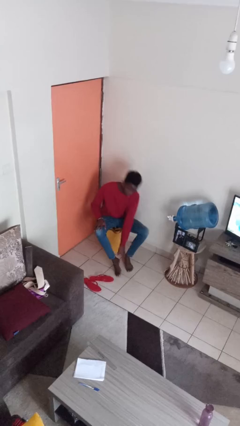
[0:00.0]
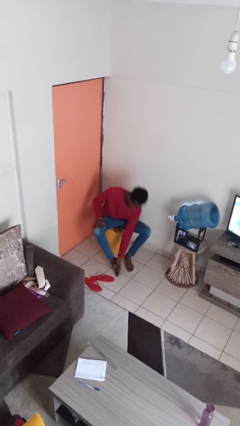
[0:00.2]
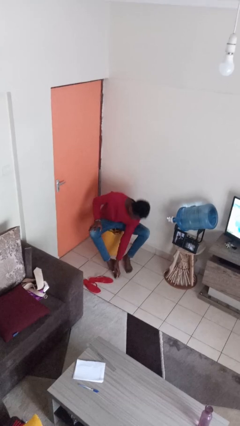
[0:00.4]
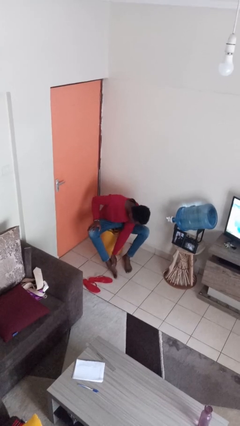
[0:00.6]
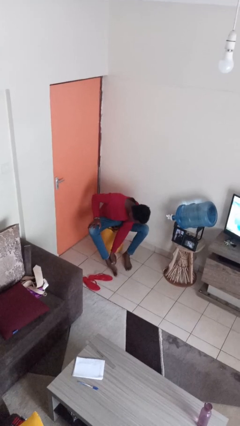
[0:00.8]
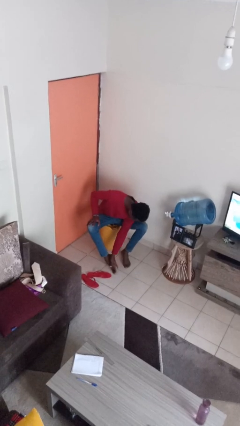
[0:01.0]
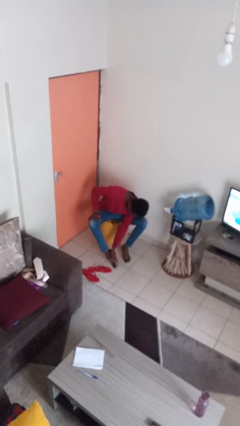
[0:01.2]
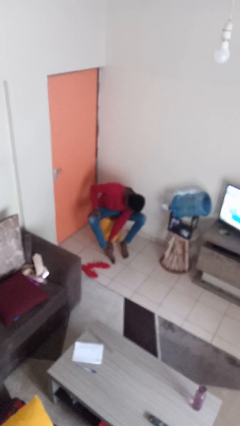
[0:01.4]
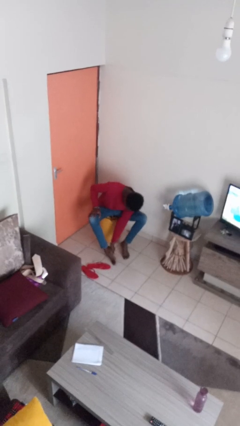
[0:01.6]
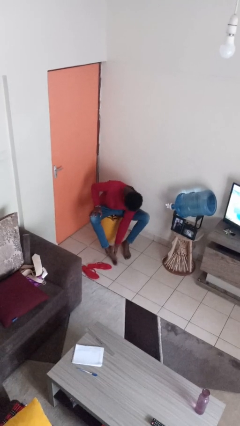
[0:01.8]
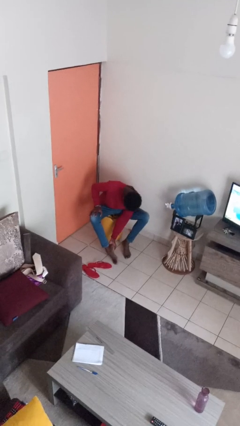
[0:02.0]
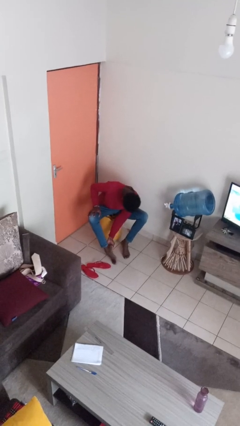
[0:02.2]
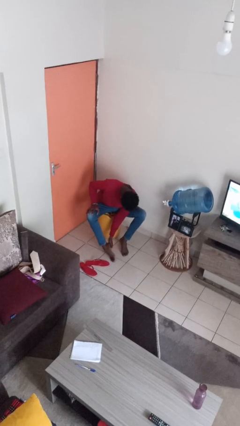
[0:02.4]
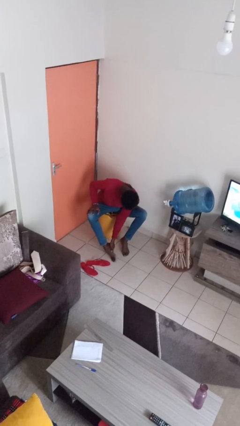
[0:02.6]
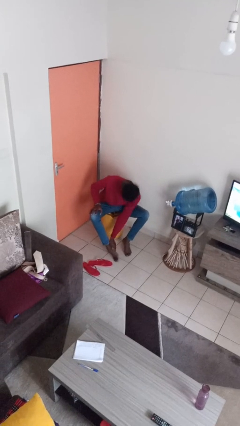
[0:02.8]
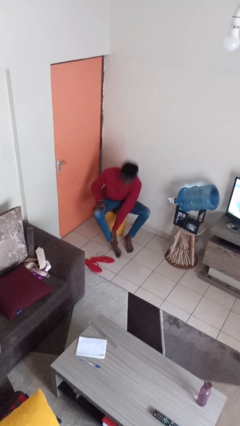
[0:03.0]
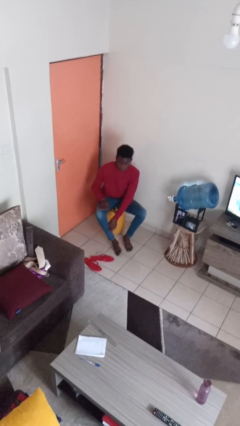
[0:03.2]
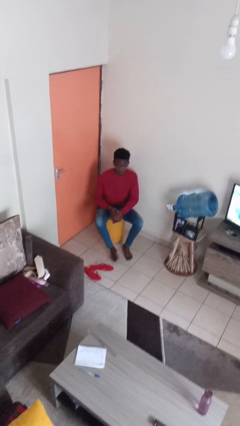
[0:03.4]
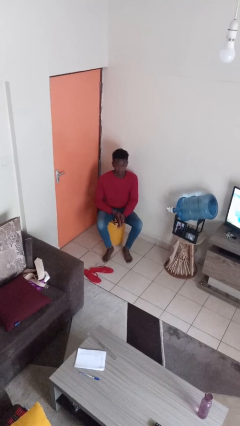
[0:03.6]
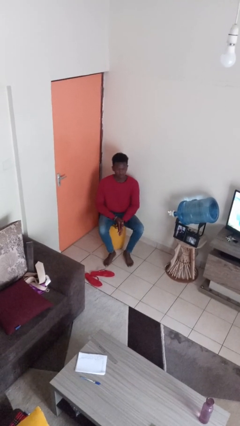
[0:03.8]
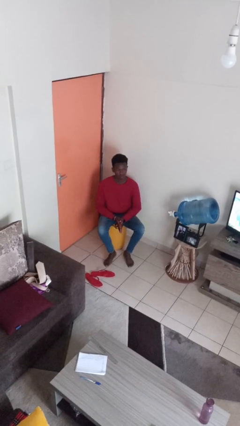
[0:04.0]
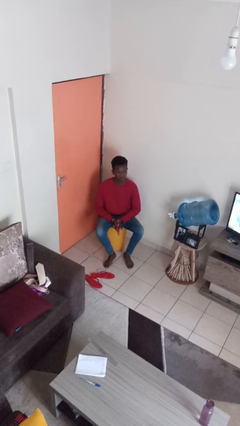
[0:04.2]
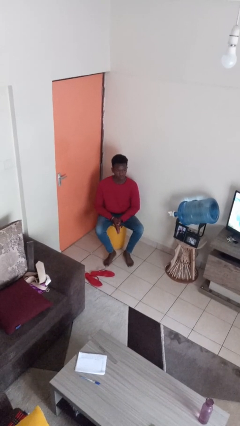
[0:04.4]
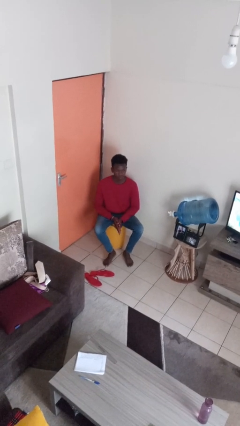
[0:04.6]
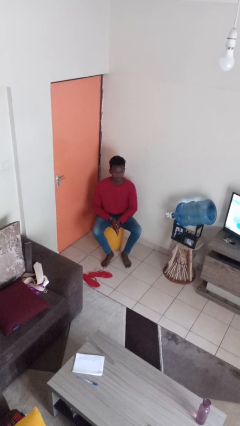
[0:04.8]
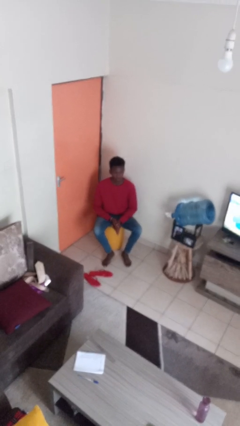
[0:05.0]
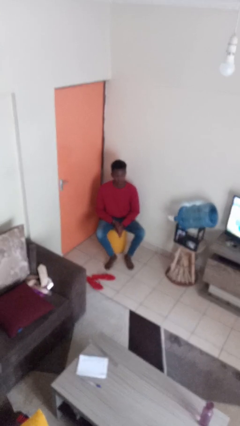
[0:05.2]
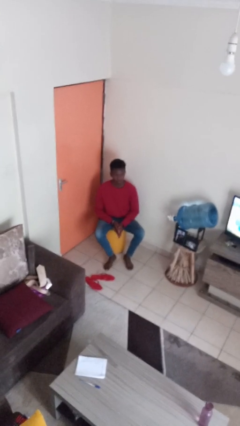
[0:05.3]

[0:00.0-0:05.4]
person rubs foot

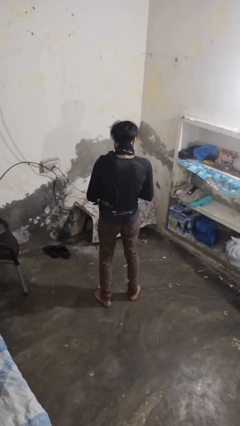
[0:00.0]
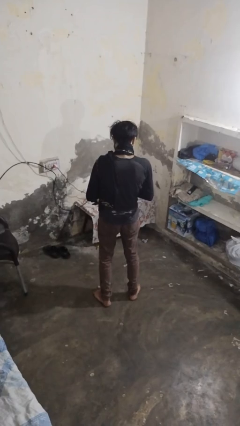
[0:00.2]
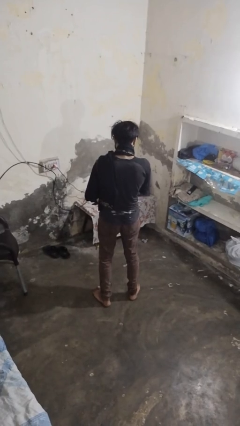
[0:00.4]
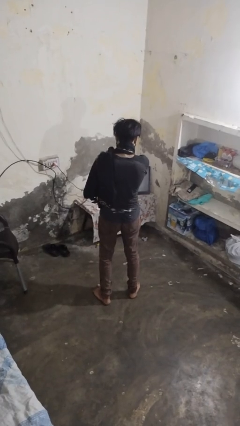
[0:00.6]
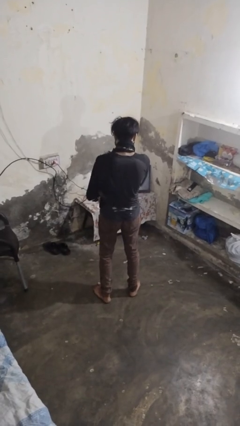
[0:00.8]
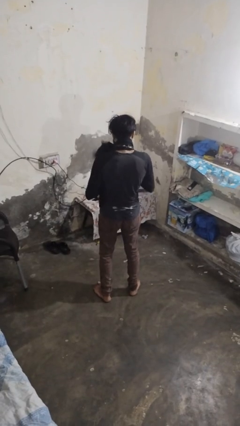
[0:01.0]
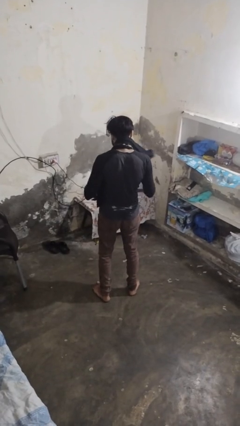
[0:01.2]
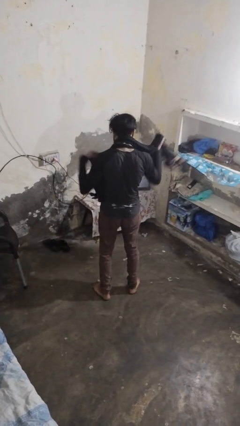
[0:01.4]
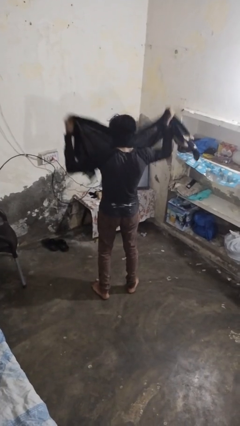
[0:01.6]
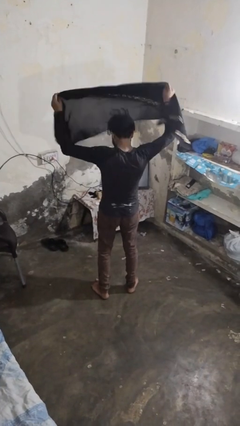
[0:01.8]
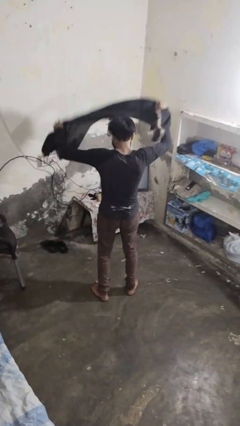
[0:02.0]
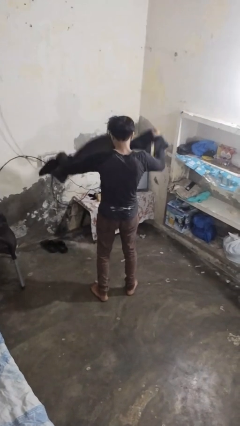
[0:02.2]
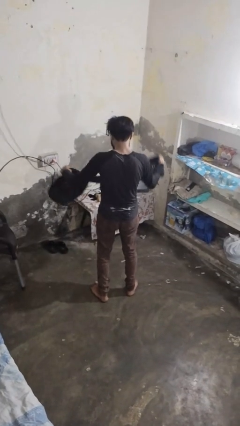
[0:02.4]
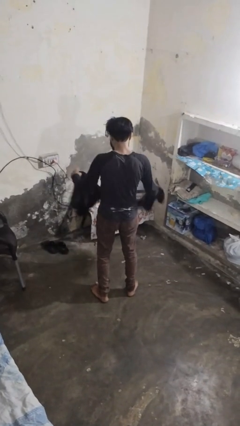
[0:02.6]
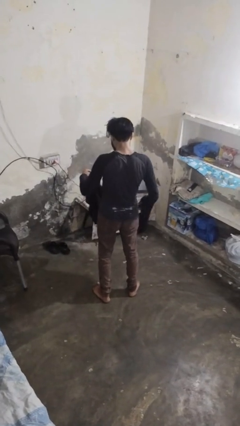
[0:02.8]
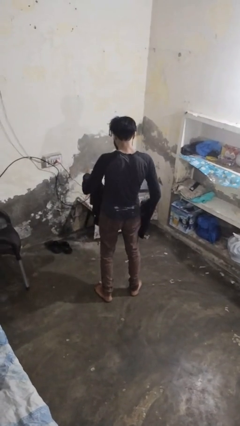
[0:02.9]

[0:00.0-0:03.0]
person takes off scarf

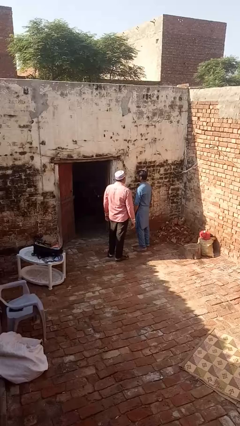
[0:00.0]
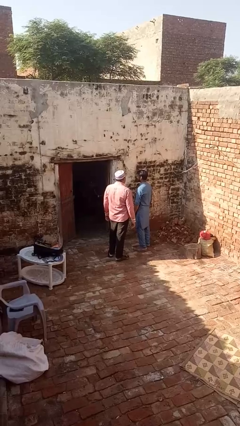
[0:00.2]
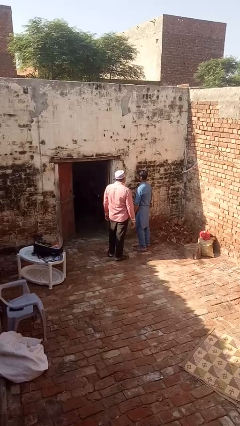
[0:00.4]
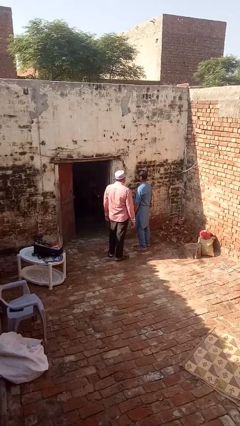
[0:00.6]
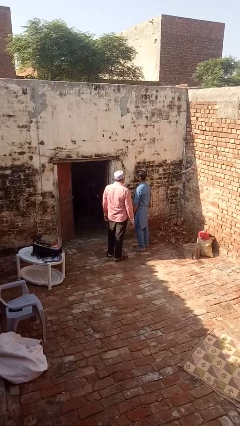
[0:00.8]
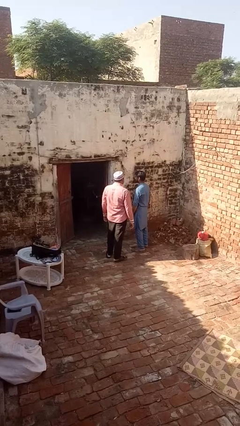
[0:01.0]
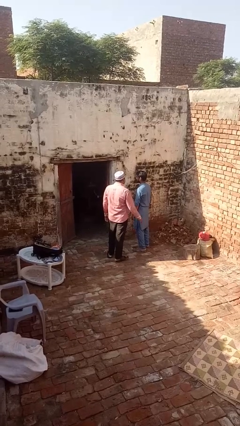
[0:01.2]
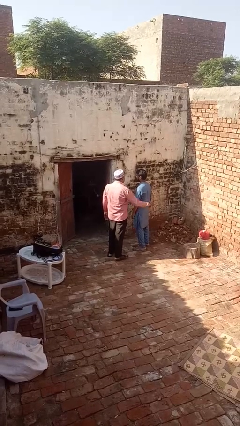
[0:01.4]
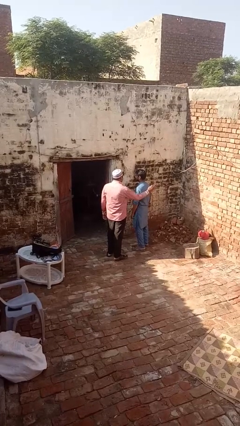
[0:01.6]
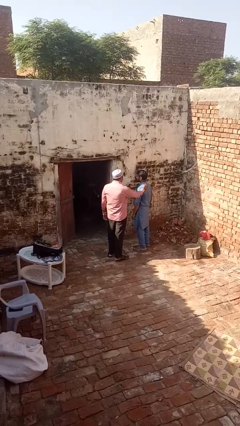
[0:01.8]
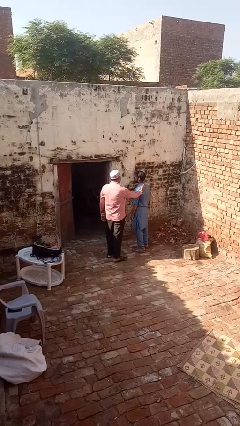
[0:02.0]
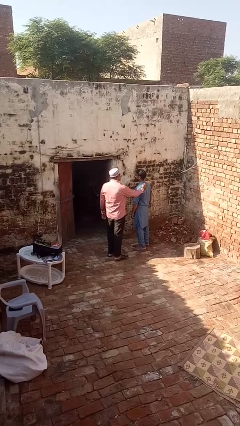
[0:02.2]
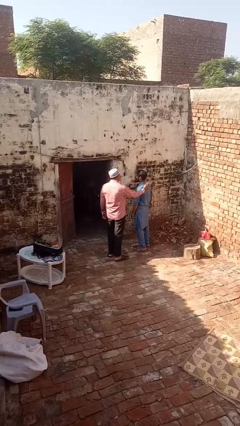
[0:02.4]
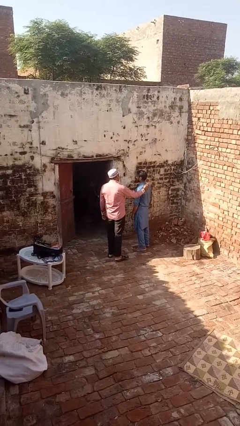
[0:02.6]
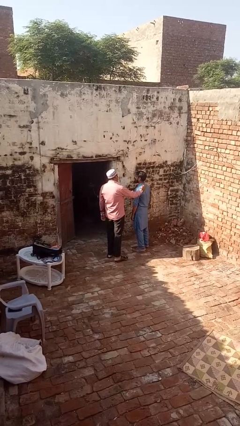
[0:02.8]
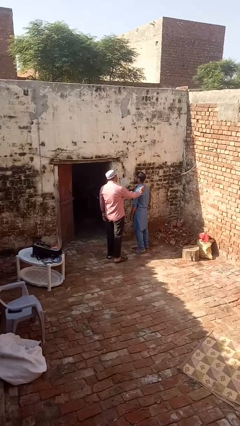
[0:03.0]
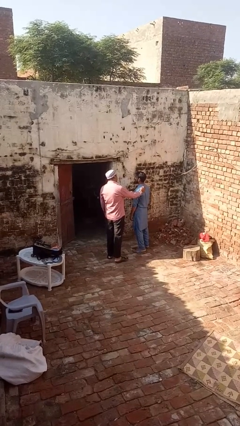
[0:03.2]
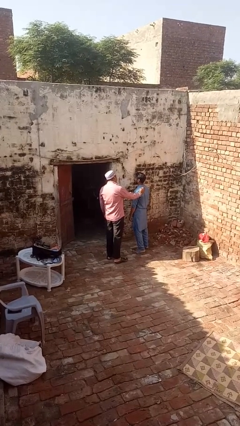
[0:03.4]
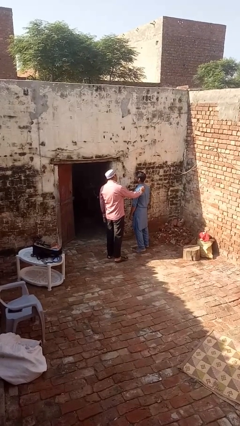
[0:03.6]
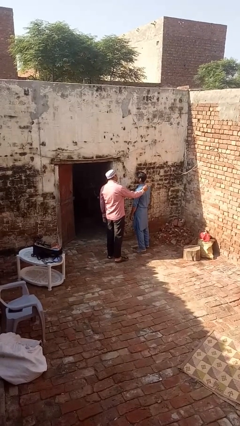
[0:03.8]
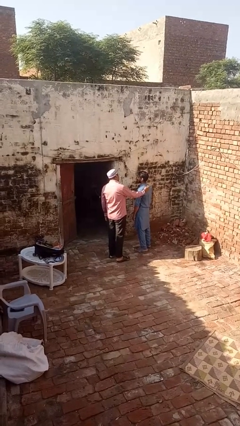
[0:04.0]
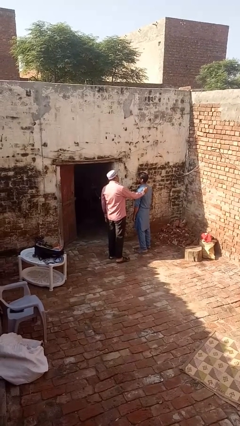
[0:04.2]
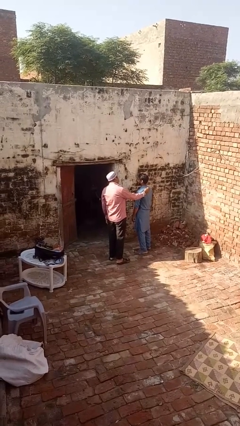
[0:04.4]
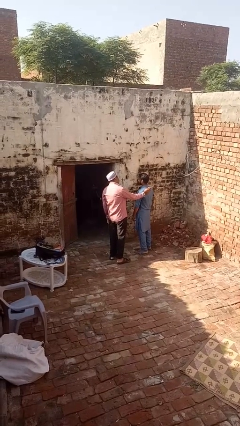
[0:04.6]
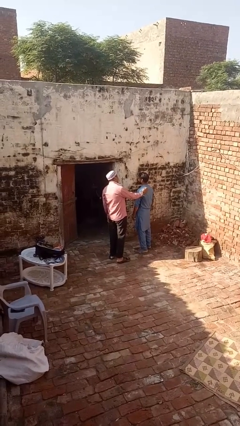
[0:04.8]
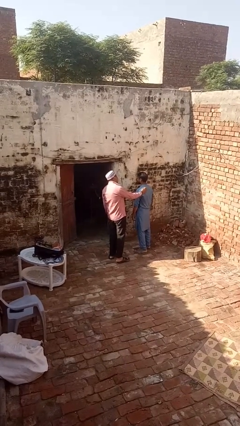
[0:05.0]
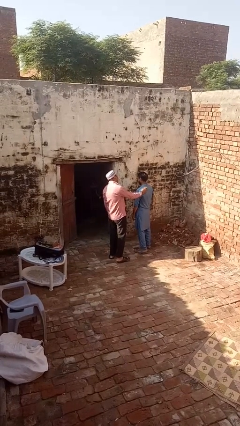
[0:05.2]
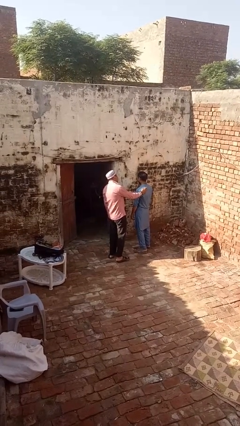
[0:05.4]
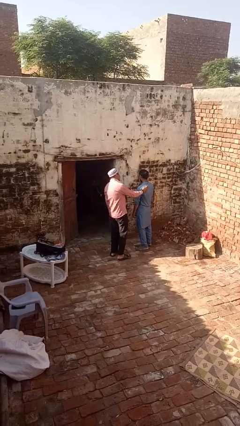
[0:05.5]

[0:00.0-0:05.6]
person laughs with person

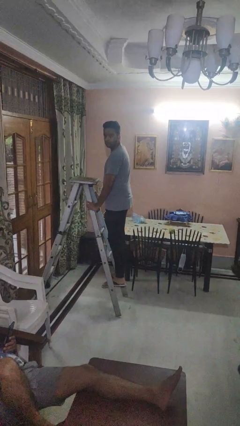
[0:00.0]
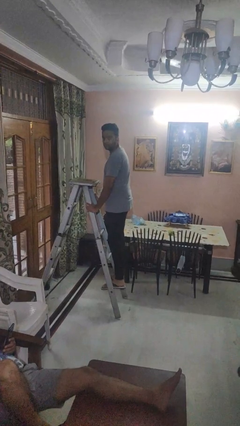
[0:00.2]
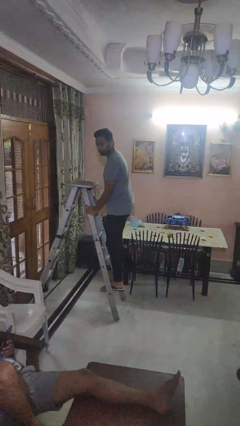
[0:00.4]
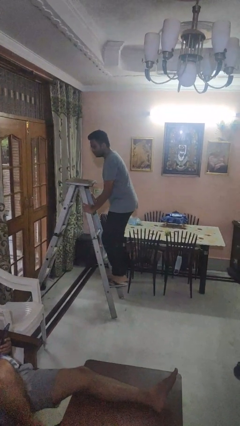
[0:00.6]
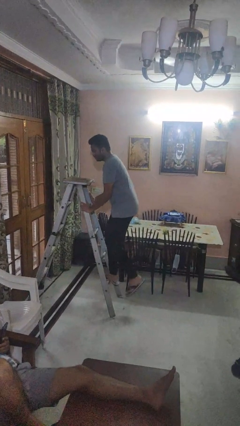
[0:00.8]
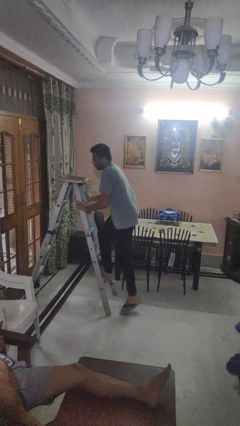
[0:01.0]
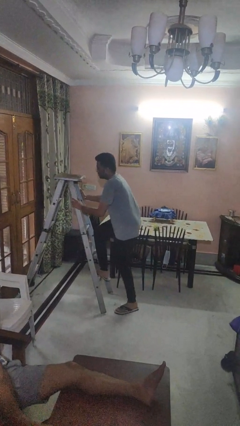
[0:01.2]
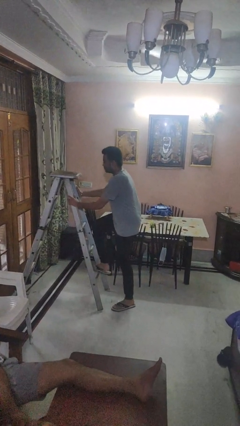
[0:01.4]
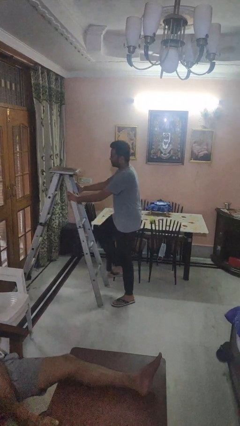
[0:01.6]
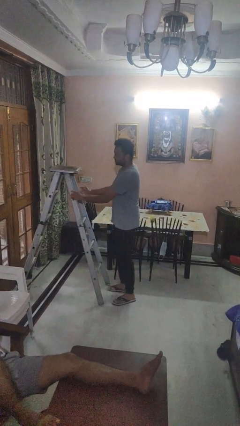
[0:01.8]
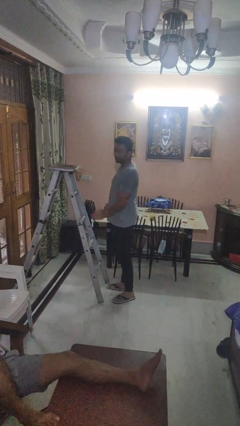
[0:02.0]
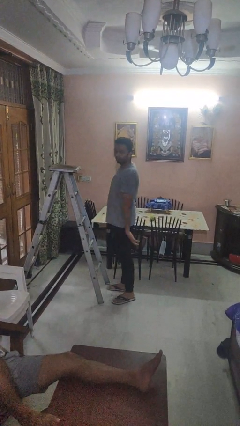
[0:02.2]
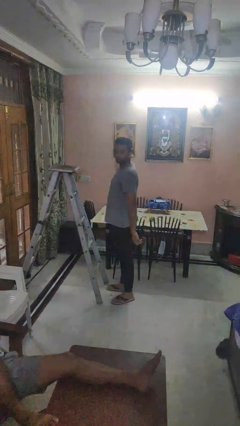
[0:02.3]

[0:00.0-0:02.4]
person climbs down ladder

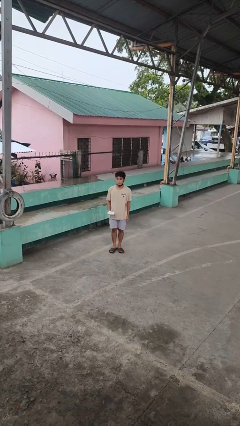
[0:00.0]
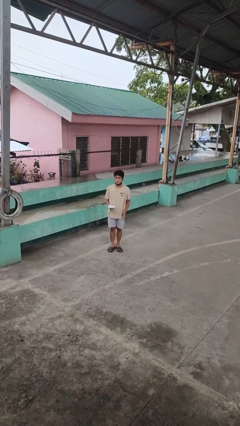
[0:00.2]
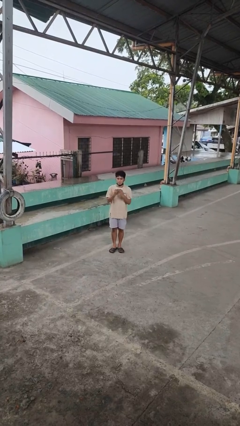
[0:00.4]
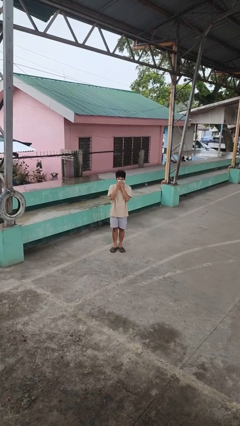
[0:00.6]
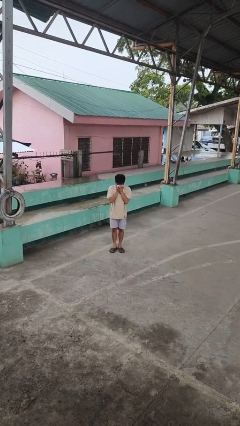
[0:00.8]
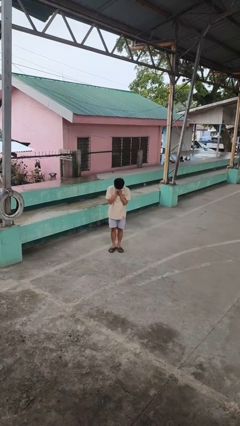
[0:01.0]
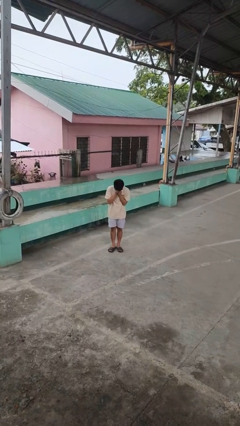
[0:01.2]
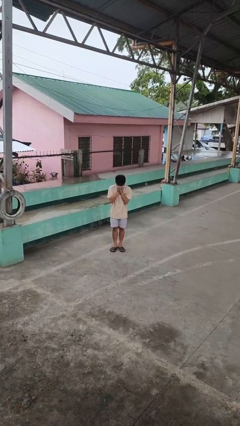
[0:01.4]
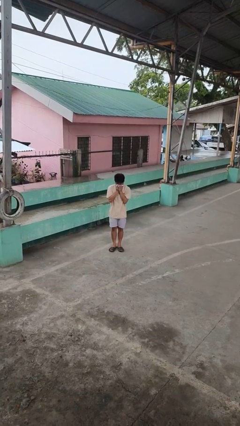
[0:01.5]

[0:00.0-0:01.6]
person blows nose
